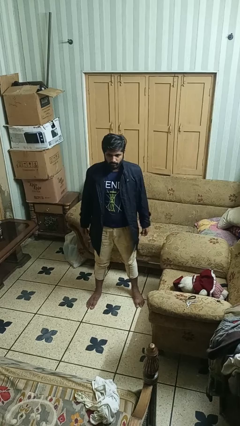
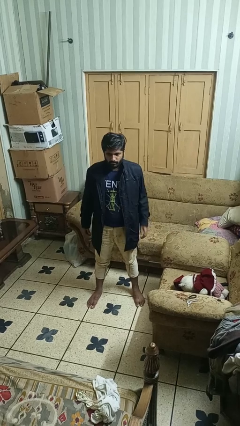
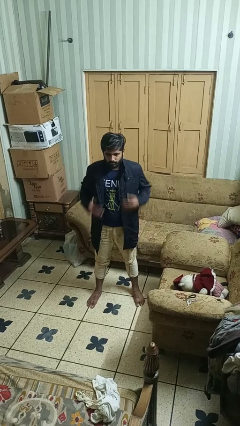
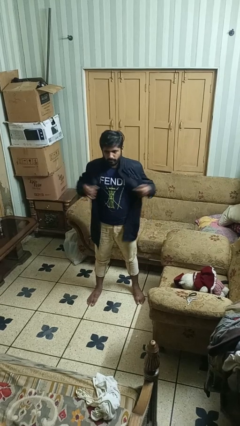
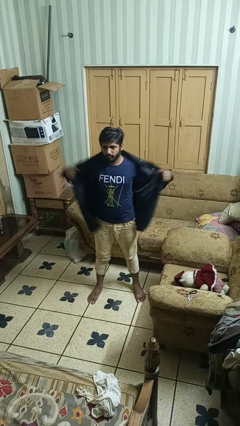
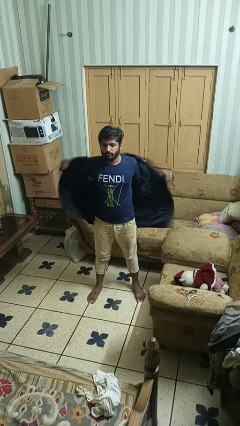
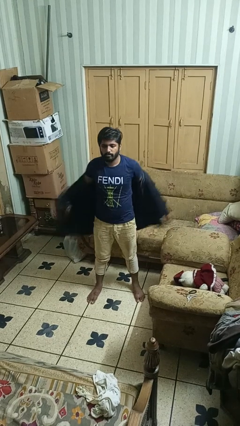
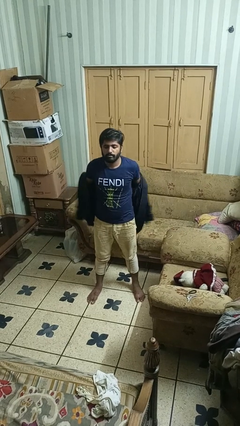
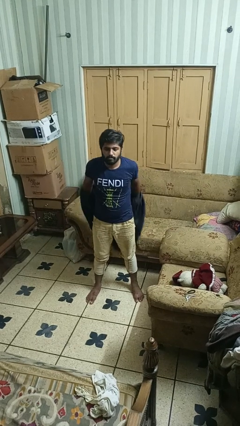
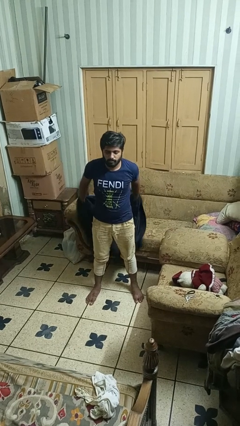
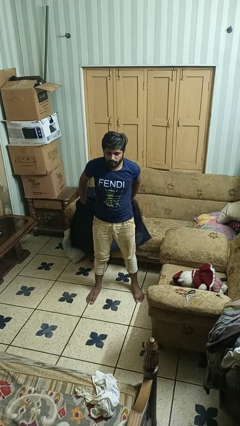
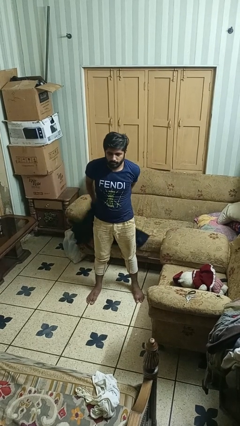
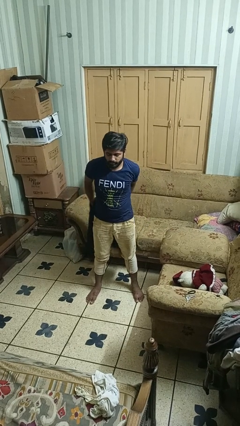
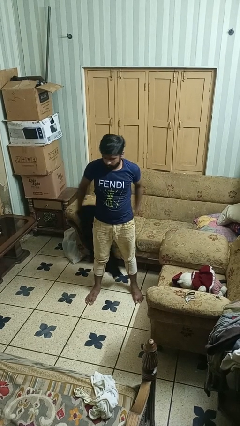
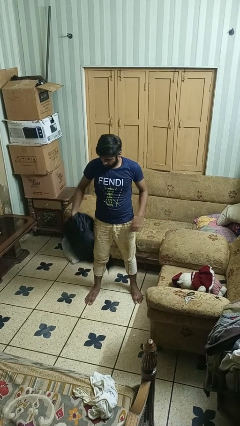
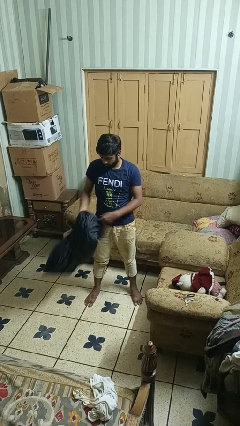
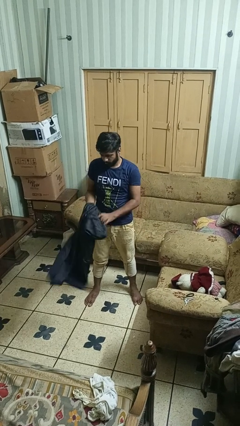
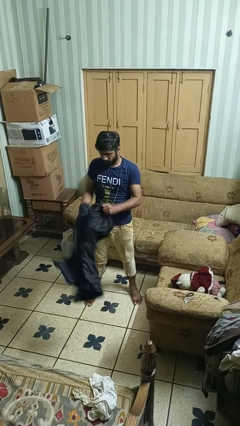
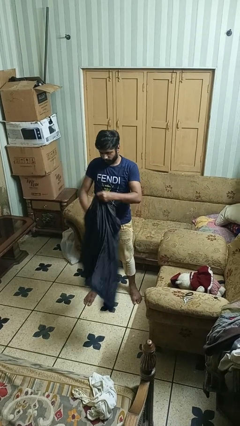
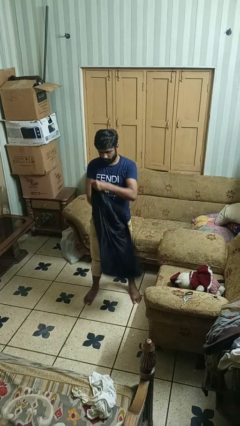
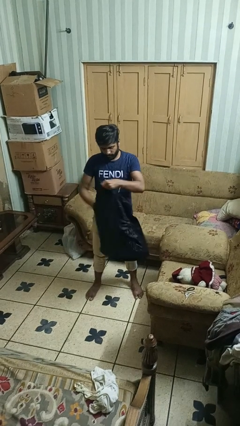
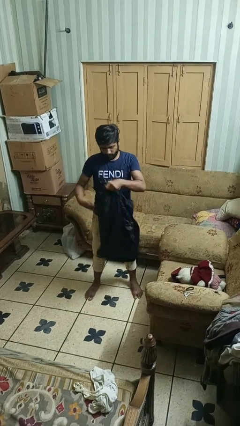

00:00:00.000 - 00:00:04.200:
person takes off jacket

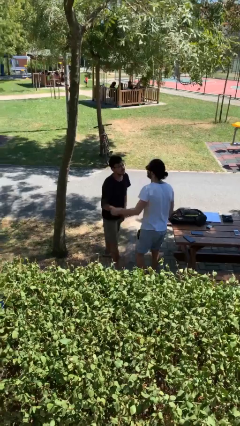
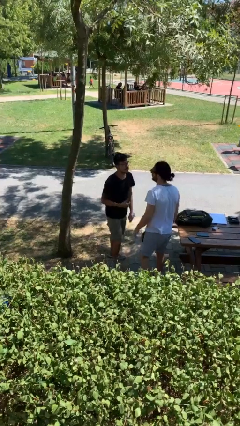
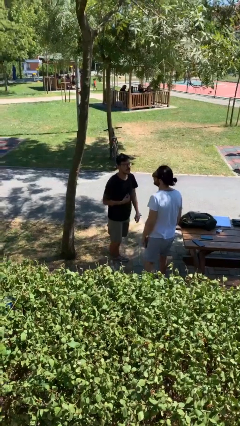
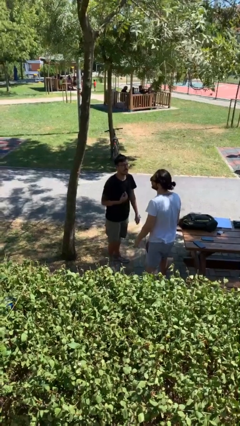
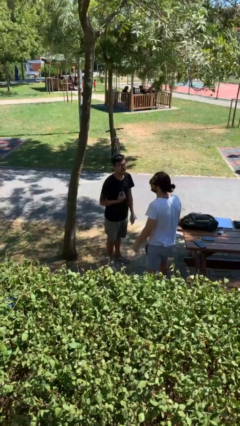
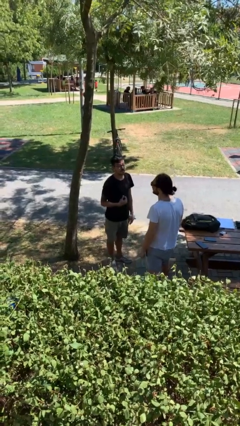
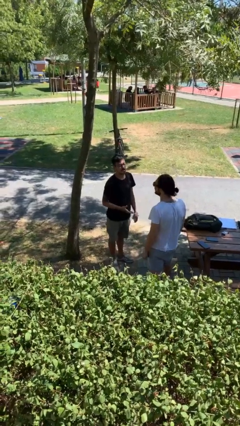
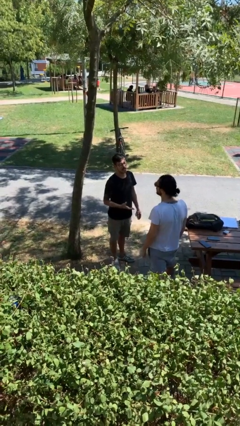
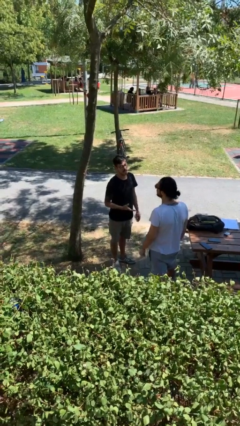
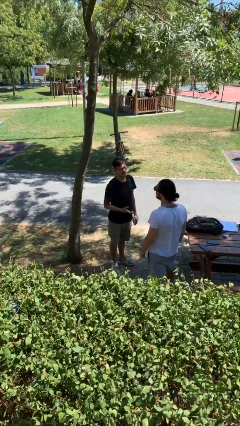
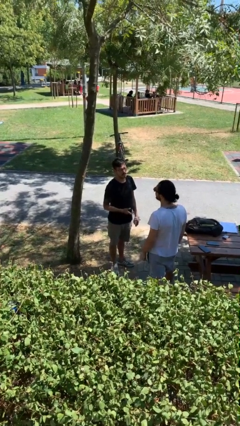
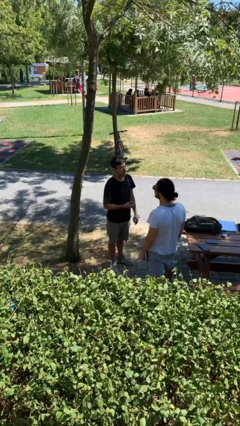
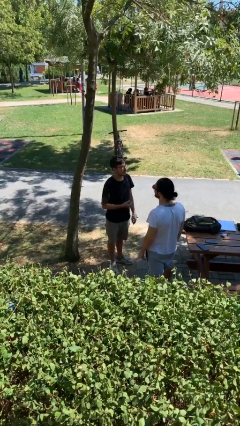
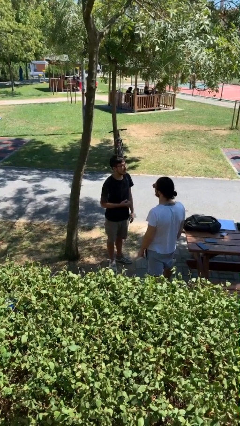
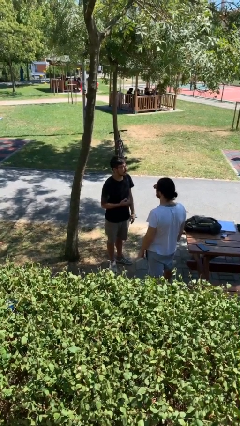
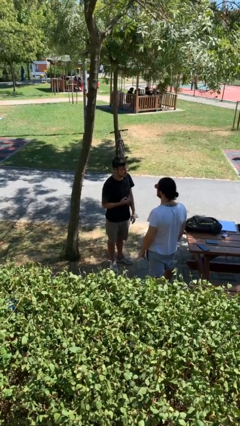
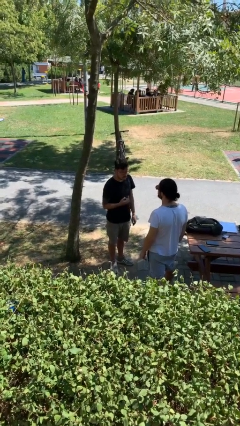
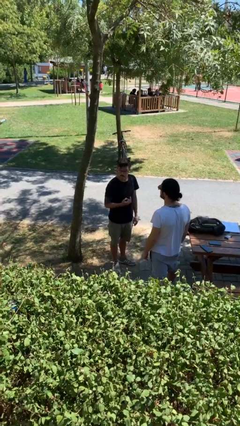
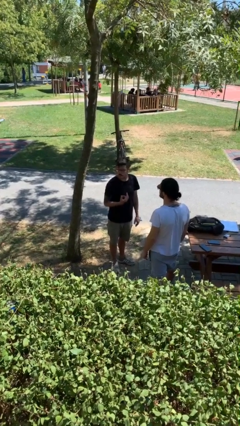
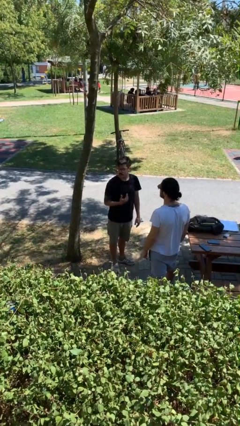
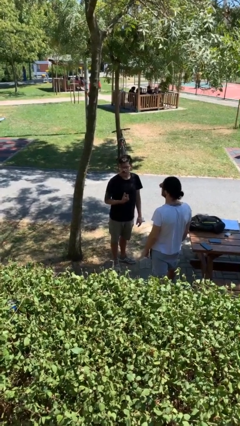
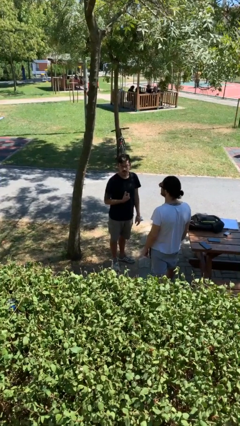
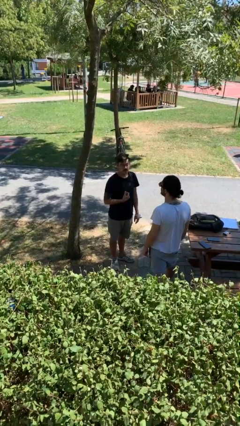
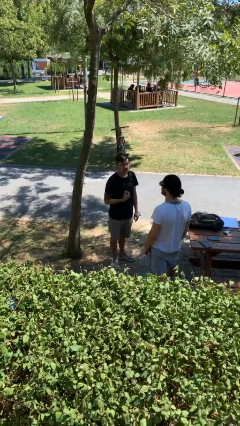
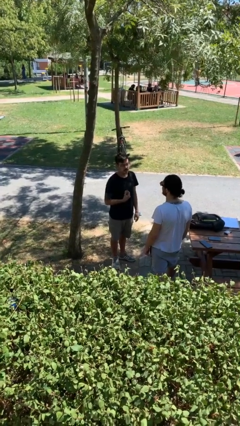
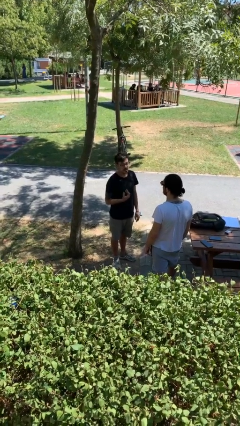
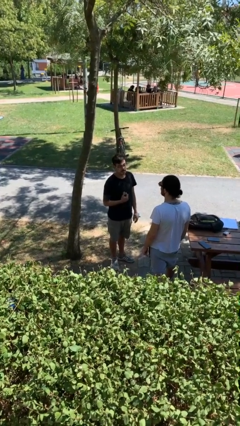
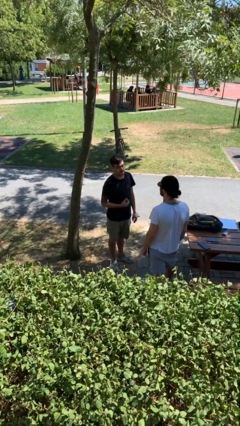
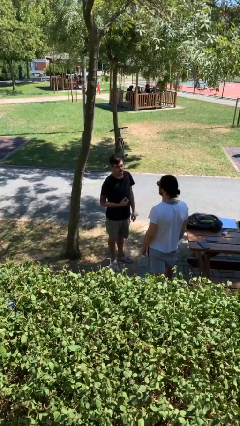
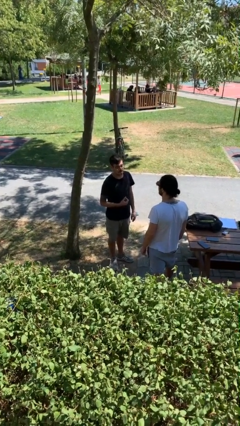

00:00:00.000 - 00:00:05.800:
person talks to person

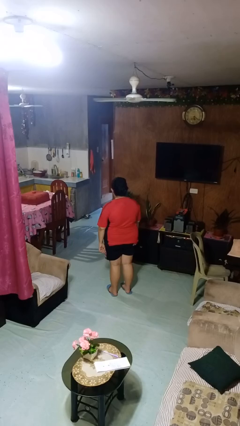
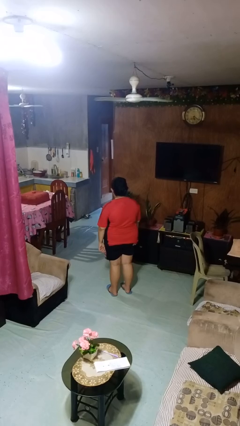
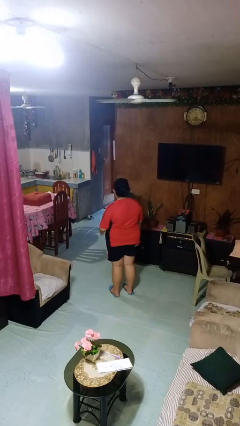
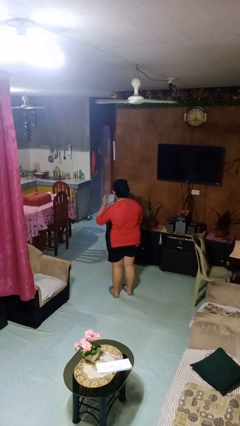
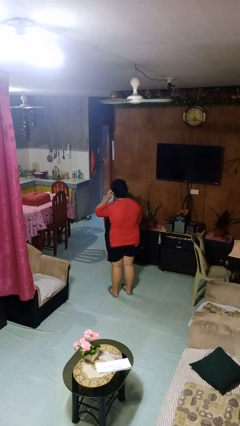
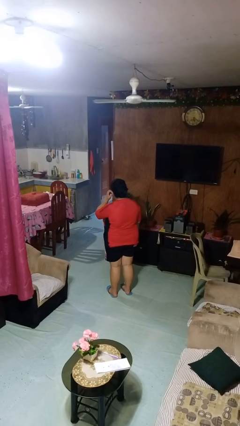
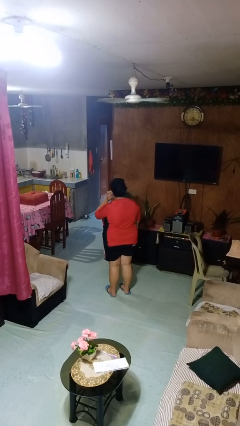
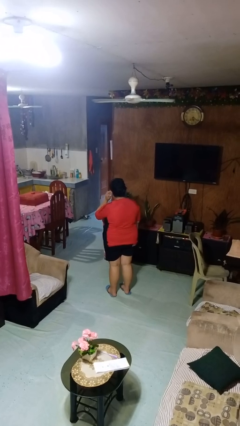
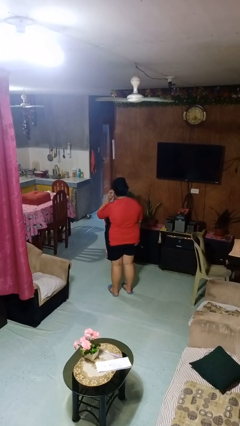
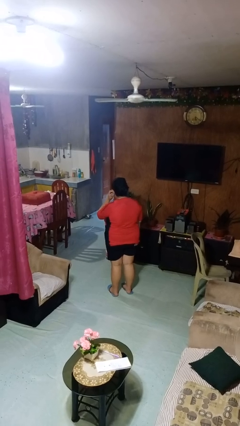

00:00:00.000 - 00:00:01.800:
person touches earlobe

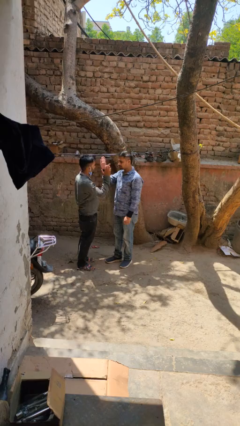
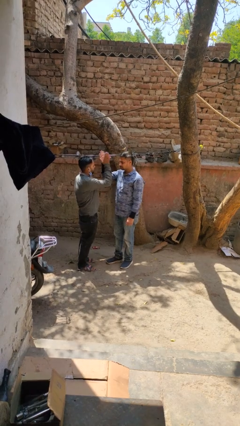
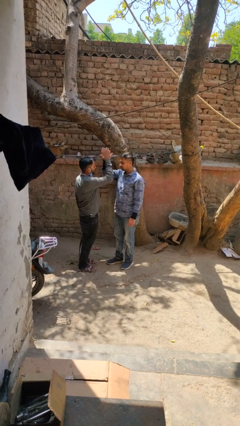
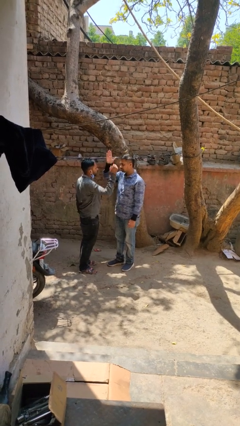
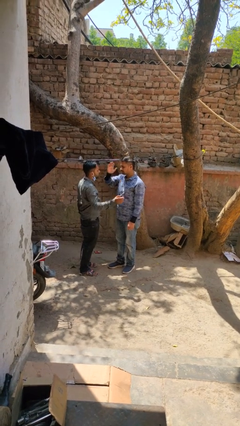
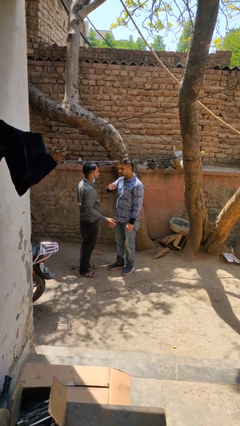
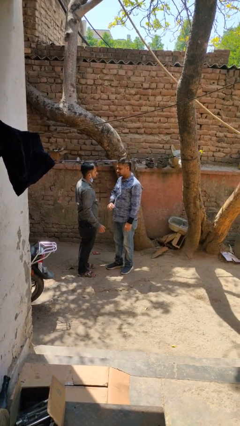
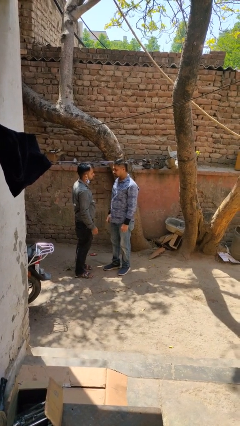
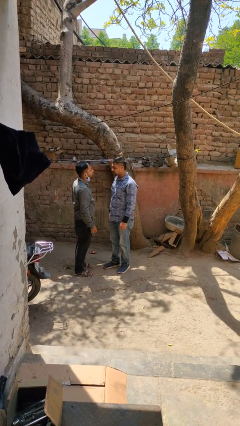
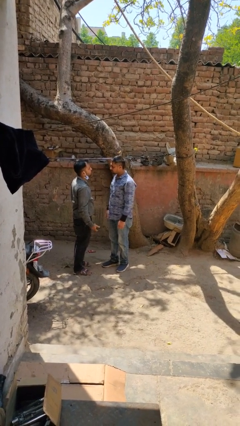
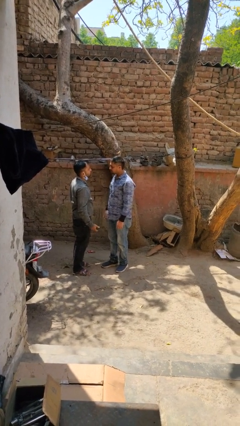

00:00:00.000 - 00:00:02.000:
person highfives hand

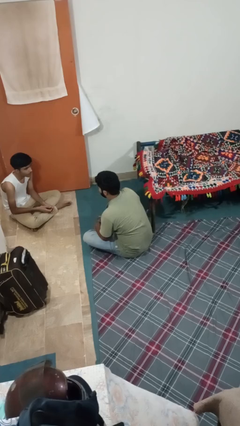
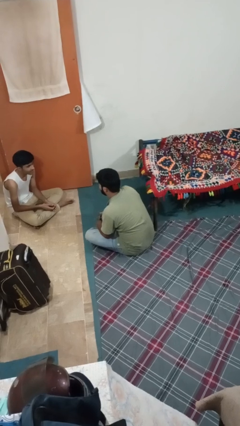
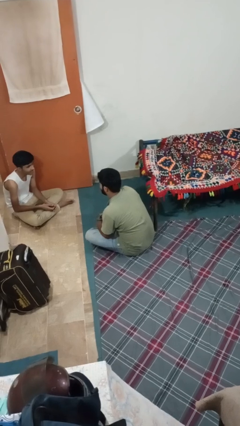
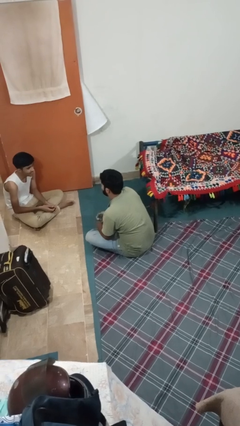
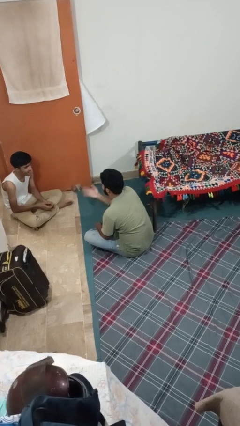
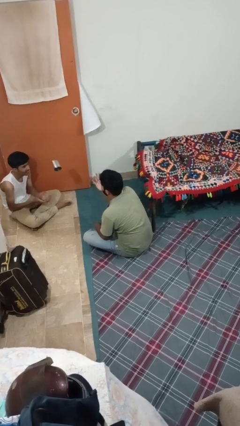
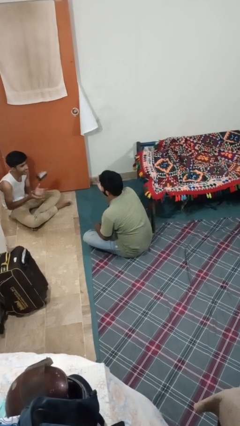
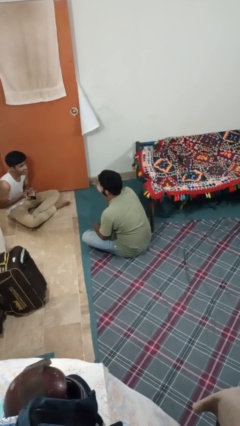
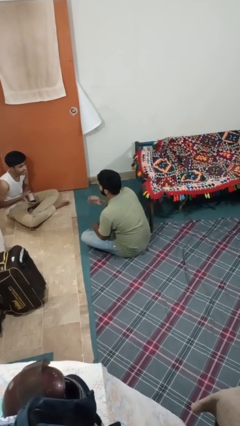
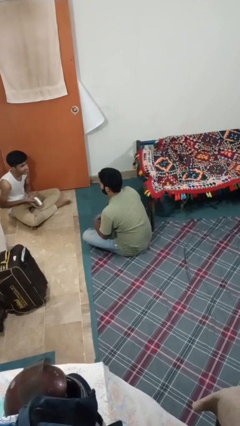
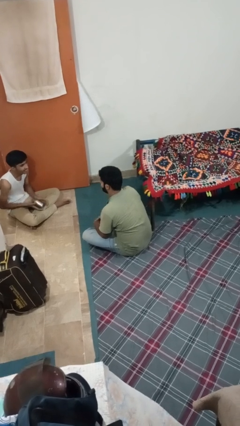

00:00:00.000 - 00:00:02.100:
person throws object to person

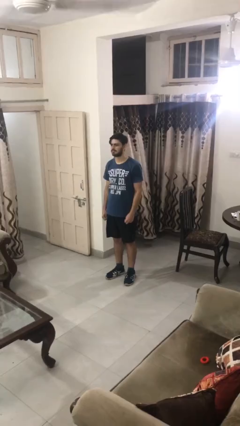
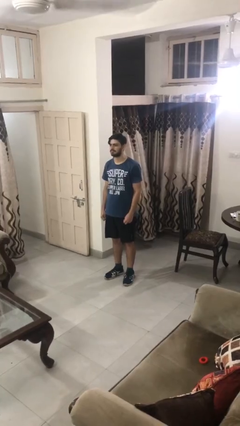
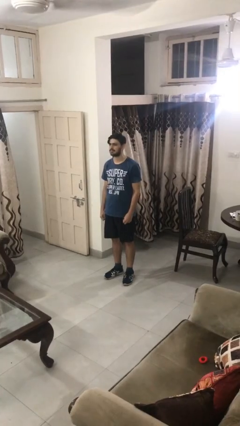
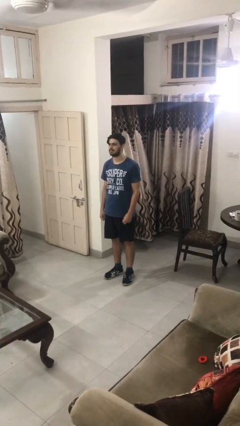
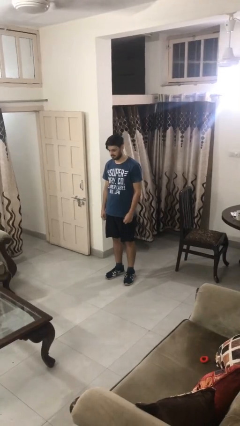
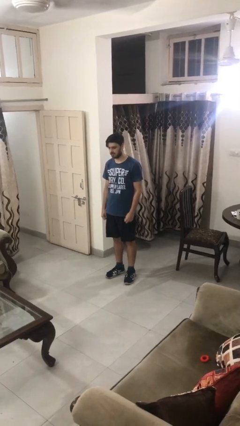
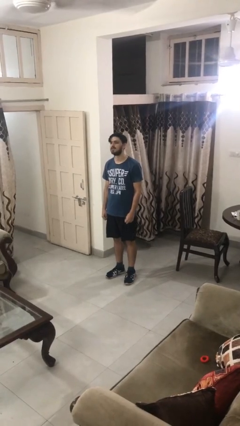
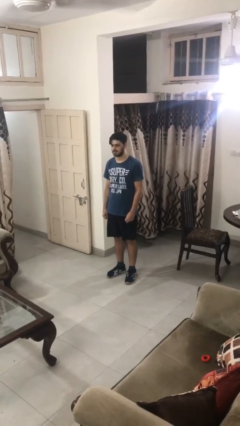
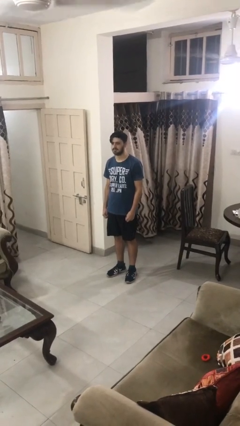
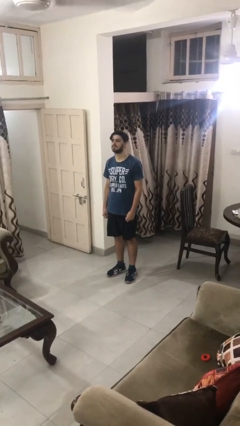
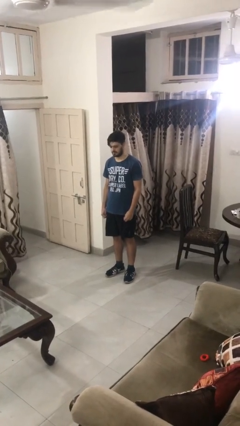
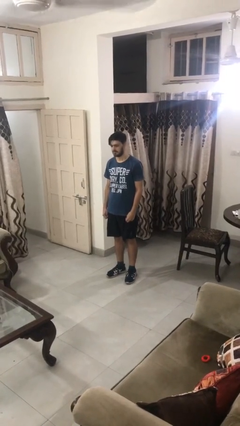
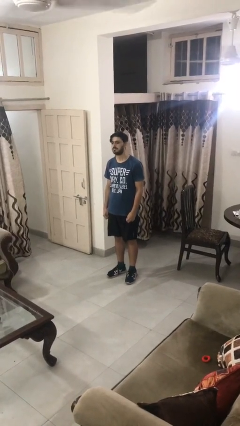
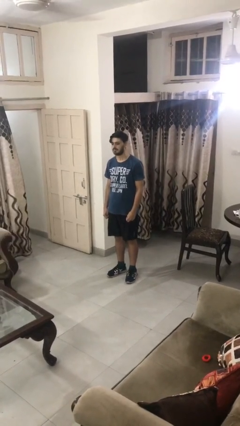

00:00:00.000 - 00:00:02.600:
person nods head
